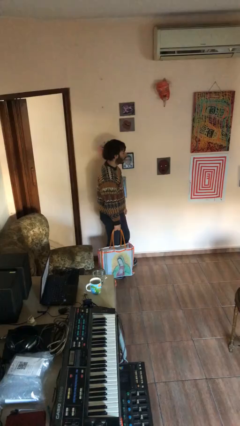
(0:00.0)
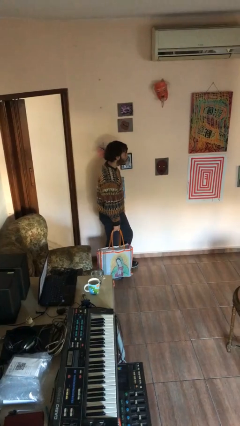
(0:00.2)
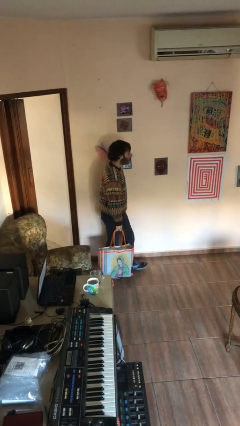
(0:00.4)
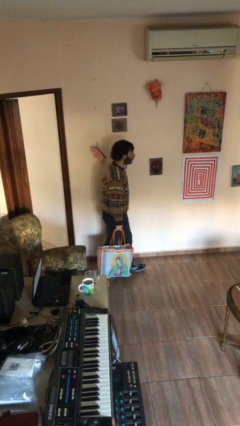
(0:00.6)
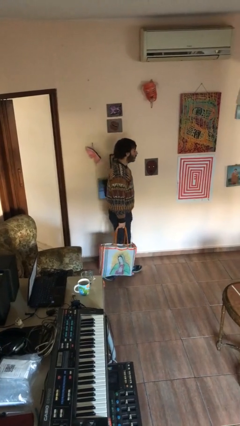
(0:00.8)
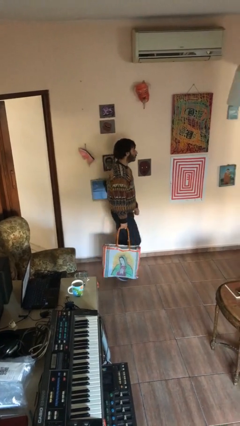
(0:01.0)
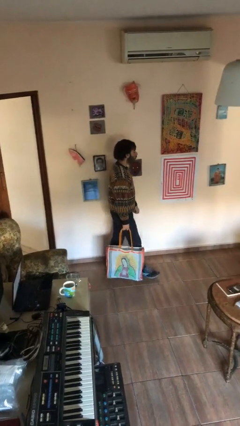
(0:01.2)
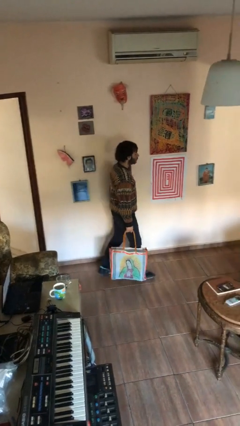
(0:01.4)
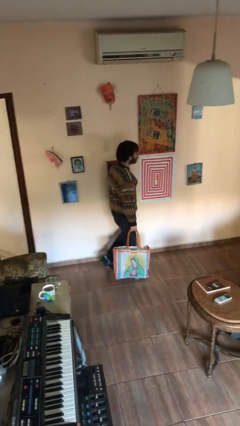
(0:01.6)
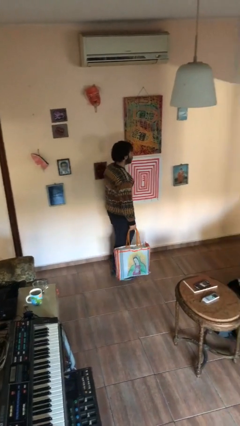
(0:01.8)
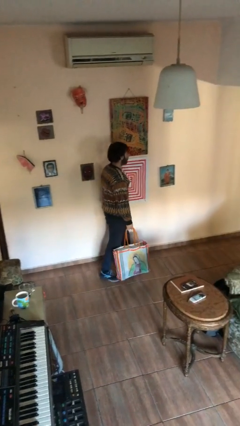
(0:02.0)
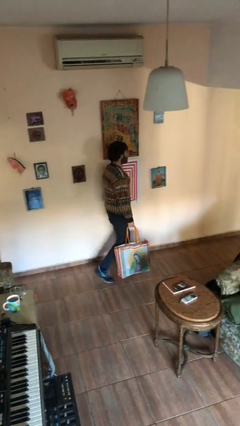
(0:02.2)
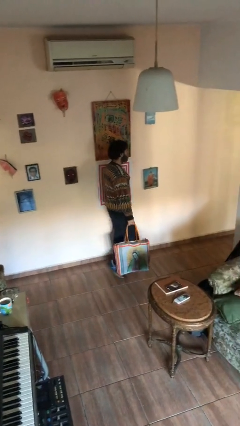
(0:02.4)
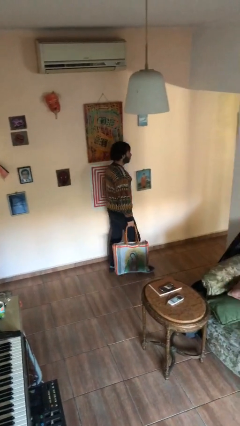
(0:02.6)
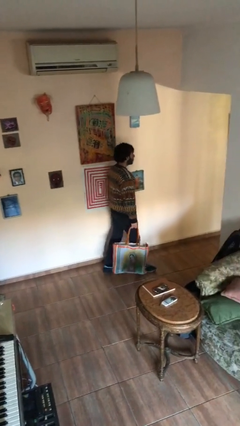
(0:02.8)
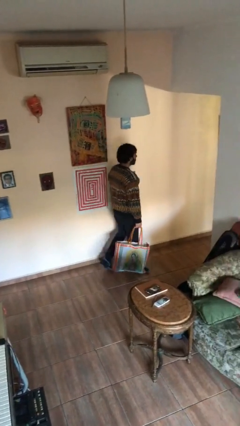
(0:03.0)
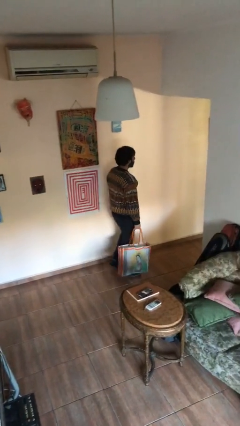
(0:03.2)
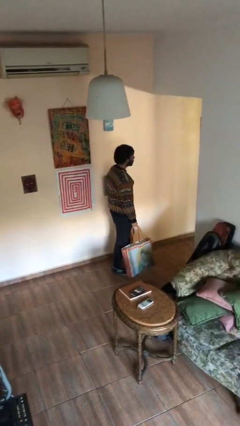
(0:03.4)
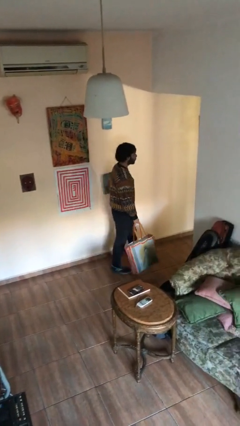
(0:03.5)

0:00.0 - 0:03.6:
person carries groceries

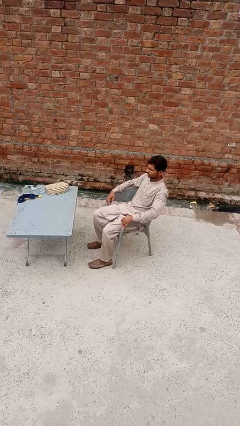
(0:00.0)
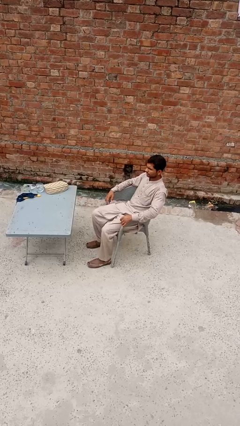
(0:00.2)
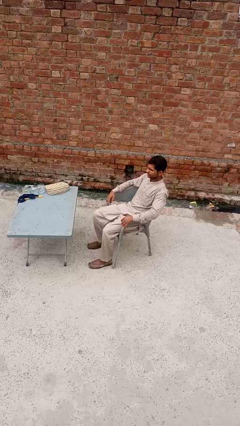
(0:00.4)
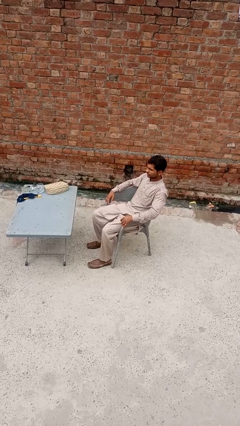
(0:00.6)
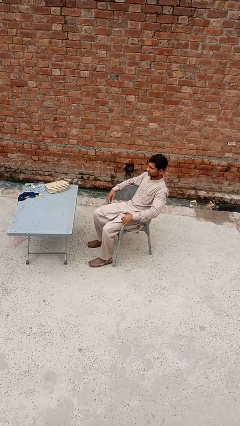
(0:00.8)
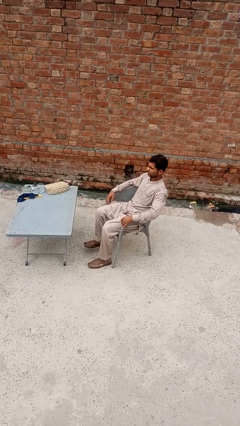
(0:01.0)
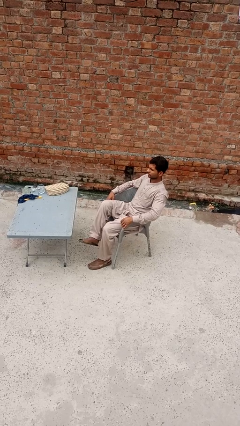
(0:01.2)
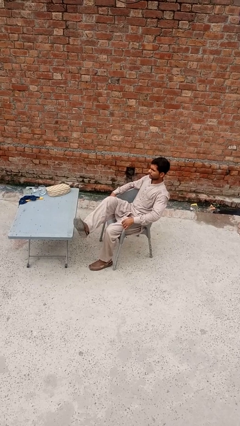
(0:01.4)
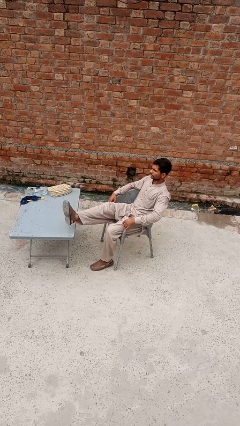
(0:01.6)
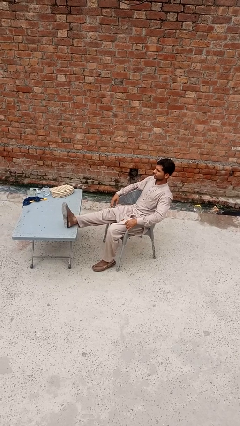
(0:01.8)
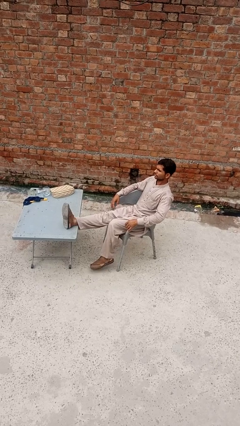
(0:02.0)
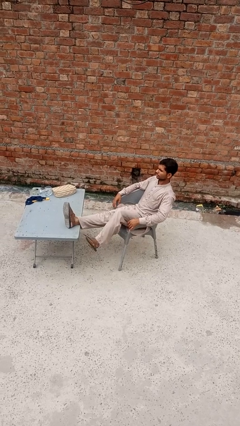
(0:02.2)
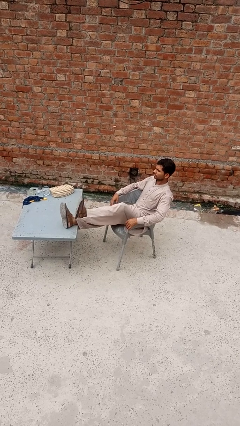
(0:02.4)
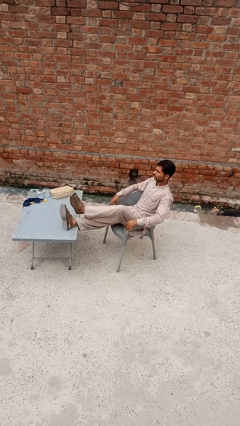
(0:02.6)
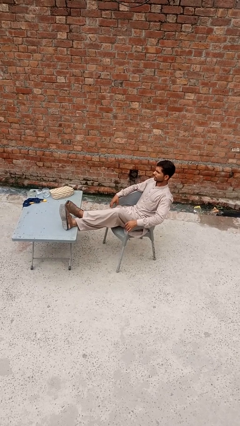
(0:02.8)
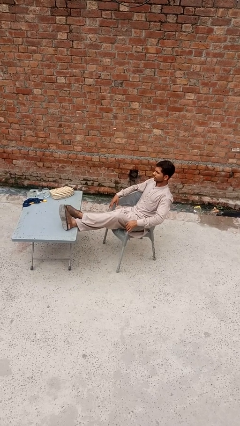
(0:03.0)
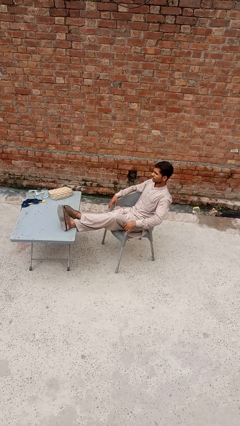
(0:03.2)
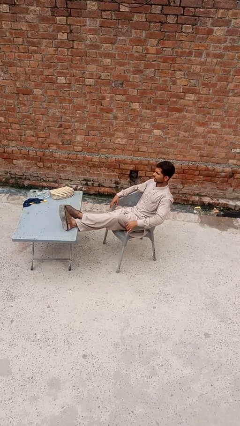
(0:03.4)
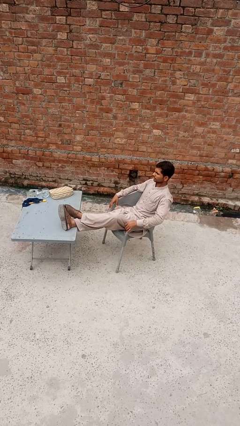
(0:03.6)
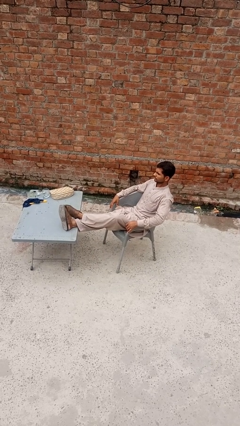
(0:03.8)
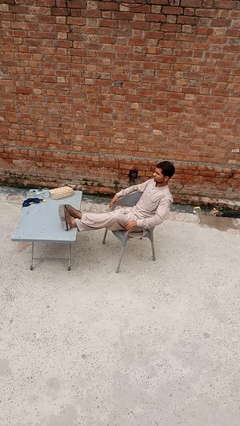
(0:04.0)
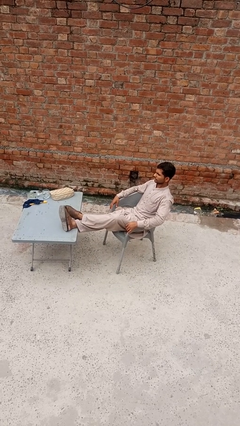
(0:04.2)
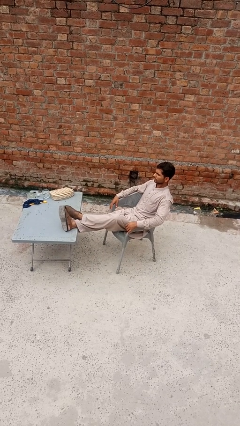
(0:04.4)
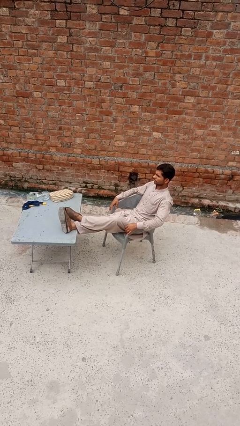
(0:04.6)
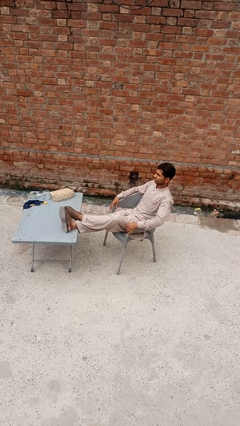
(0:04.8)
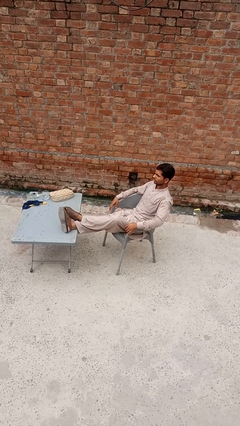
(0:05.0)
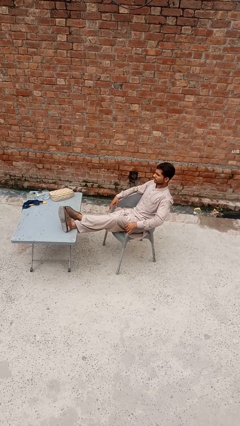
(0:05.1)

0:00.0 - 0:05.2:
person puts feet up

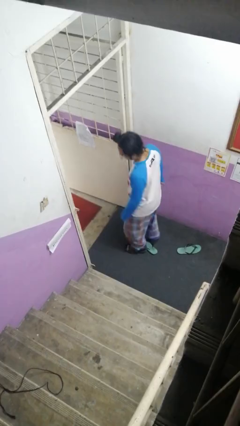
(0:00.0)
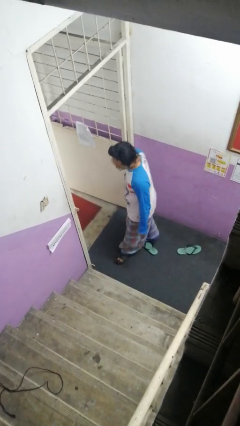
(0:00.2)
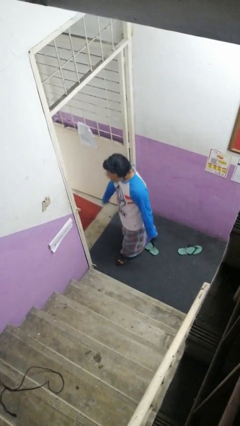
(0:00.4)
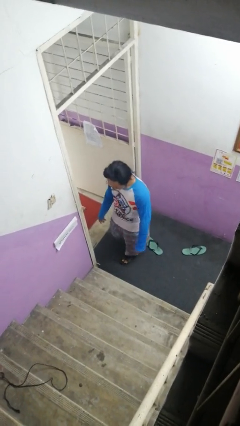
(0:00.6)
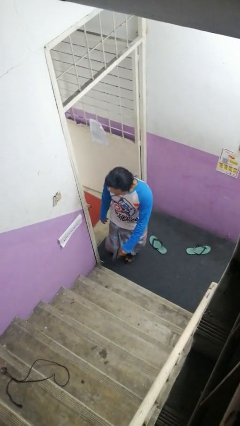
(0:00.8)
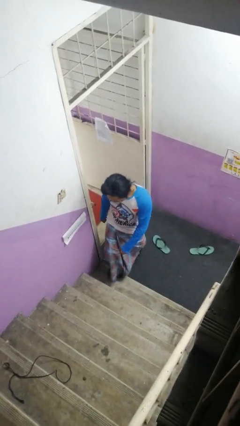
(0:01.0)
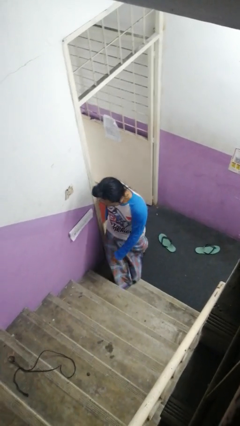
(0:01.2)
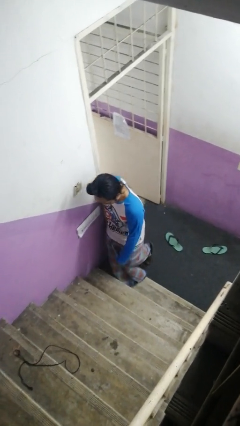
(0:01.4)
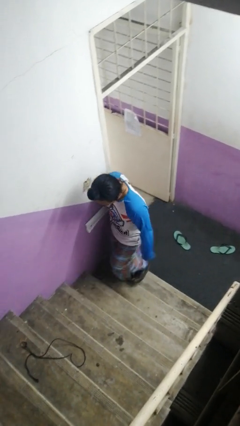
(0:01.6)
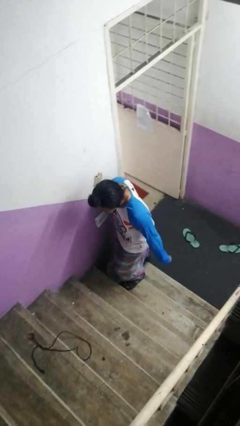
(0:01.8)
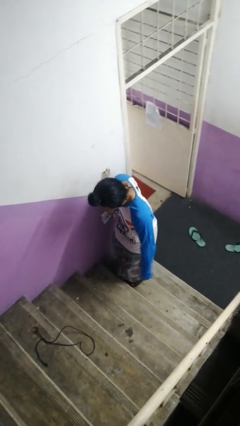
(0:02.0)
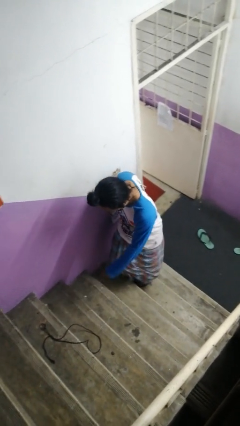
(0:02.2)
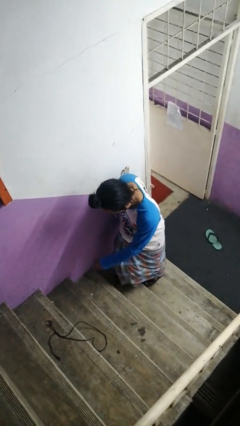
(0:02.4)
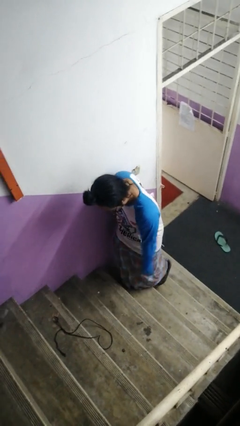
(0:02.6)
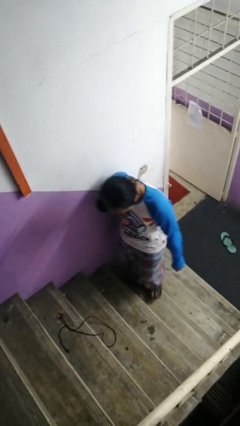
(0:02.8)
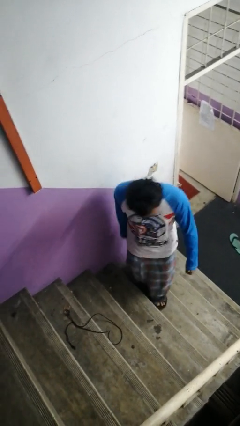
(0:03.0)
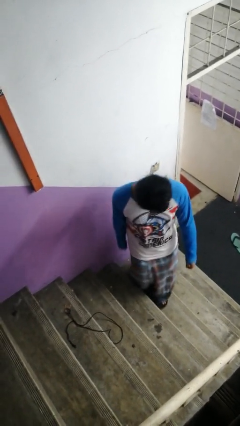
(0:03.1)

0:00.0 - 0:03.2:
person climbs up stairs

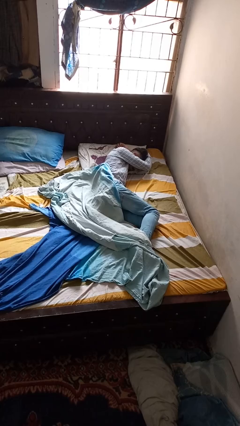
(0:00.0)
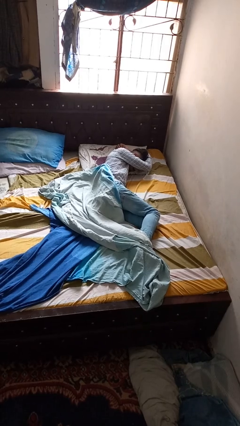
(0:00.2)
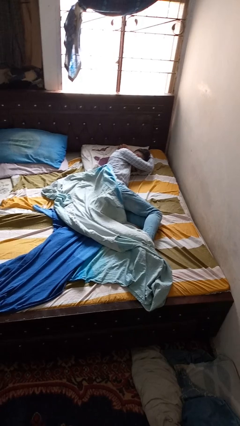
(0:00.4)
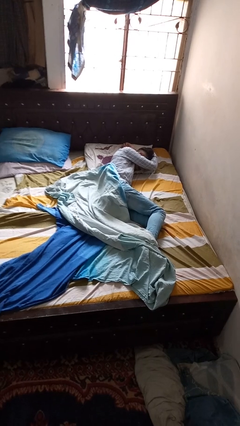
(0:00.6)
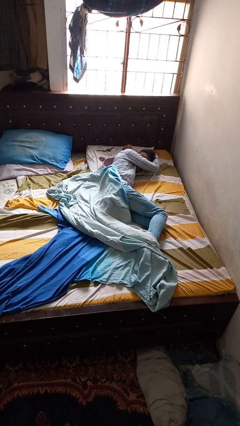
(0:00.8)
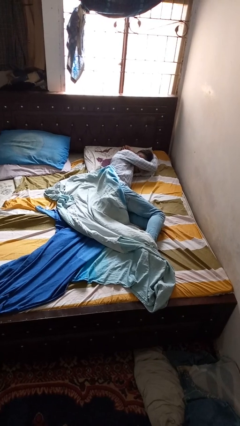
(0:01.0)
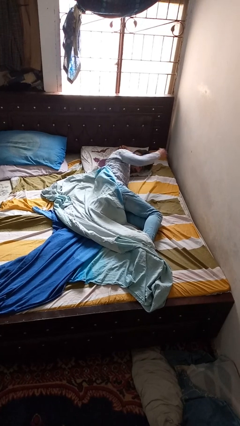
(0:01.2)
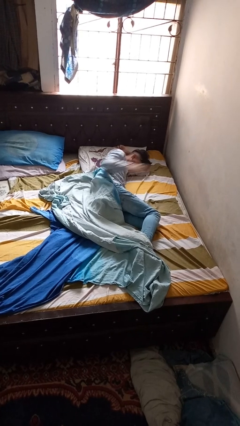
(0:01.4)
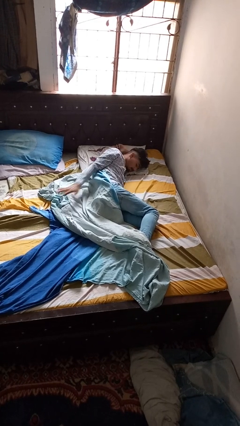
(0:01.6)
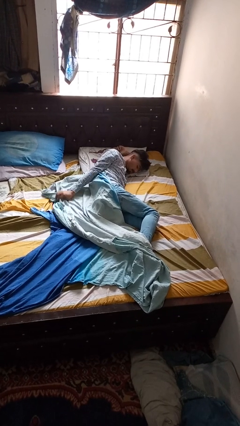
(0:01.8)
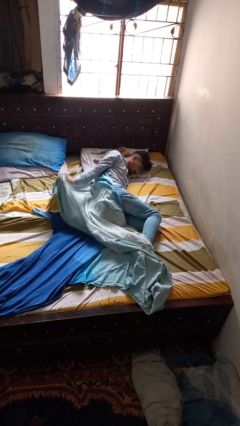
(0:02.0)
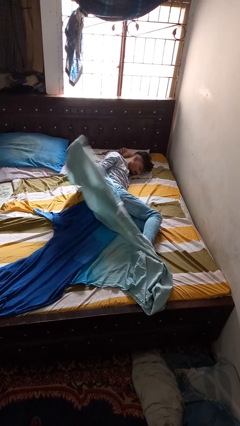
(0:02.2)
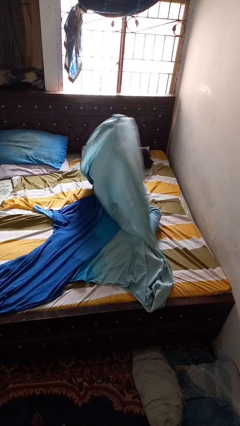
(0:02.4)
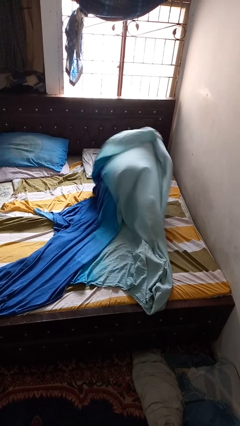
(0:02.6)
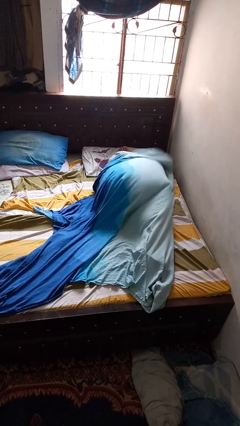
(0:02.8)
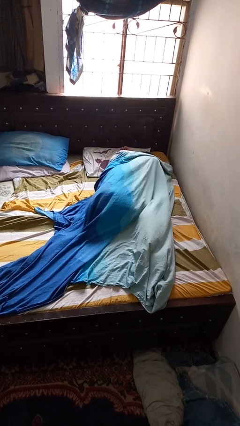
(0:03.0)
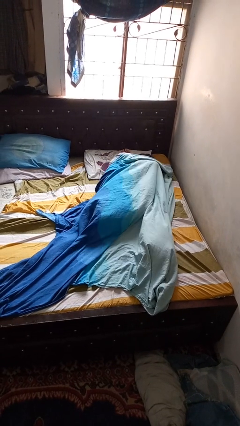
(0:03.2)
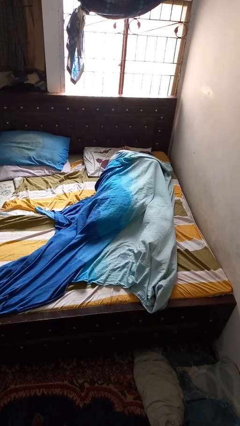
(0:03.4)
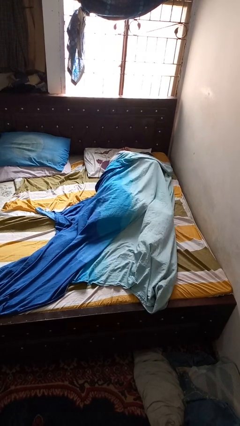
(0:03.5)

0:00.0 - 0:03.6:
person covers with blanket

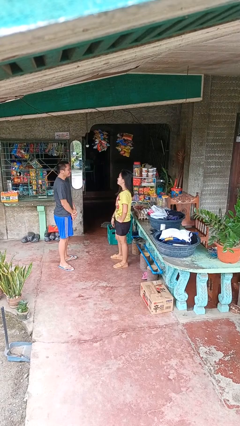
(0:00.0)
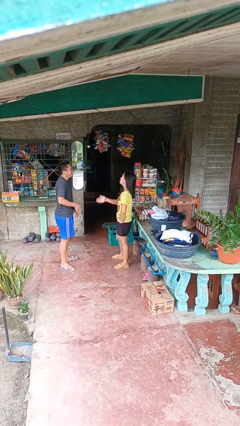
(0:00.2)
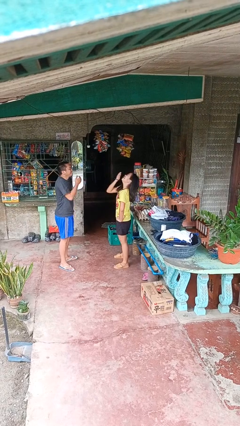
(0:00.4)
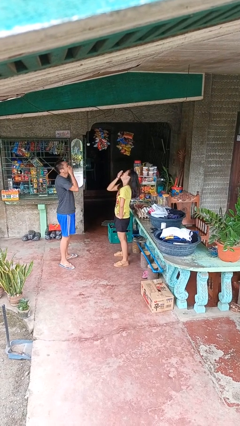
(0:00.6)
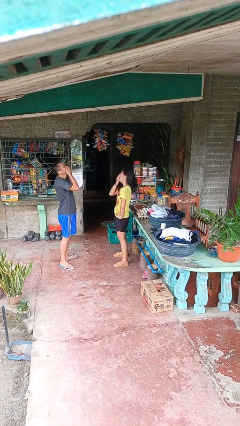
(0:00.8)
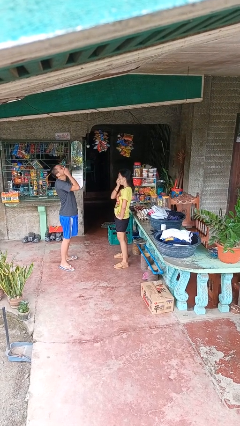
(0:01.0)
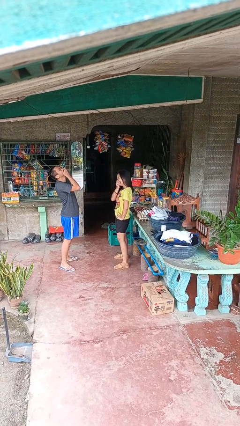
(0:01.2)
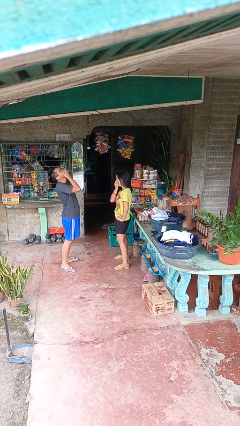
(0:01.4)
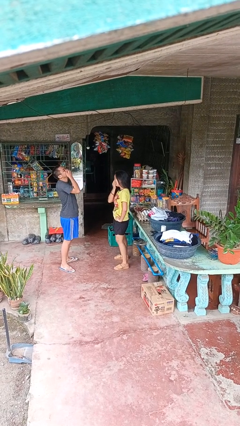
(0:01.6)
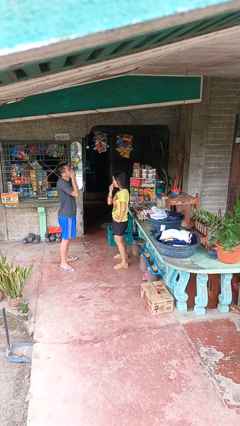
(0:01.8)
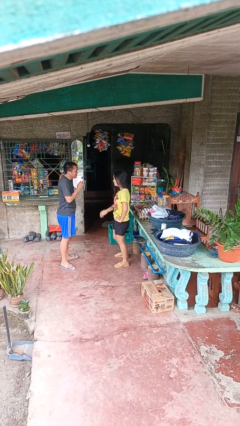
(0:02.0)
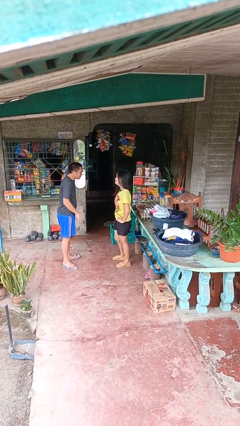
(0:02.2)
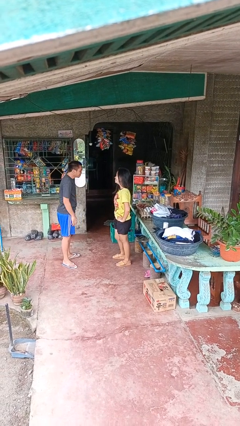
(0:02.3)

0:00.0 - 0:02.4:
person laughs with person
